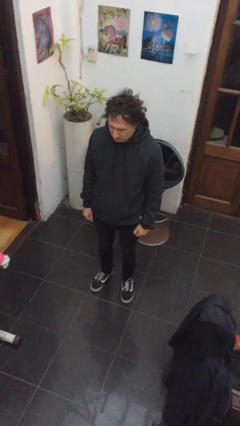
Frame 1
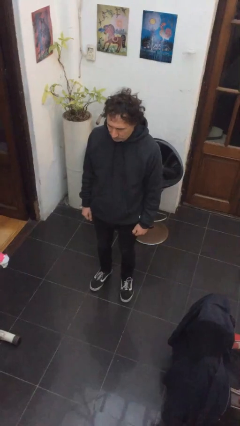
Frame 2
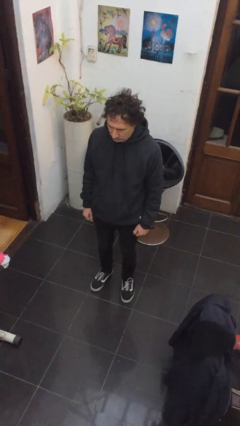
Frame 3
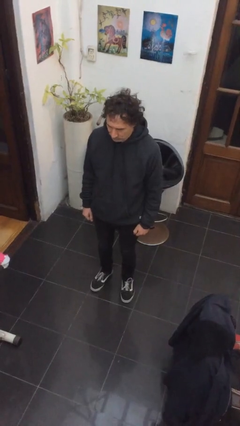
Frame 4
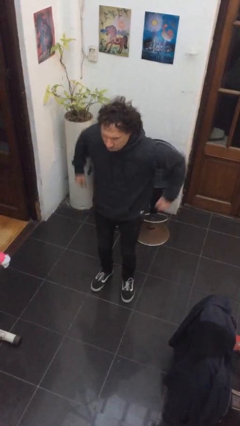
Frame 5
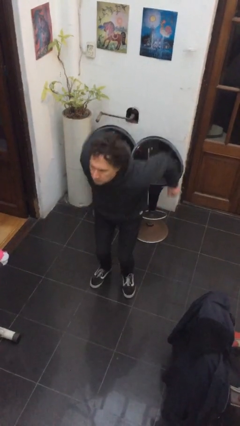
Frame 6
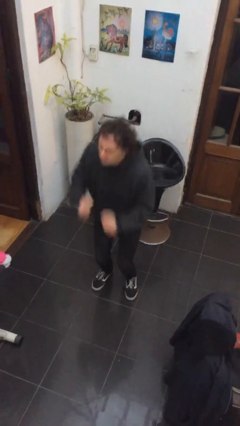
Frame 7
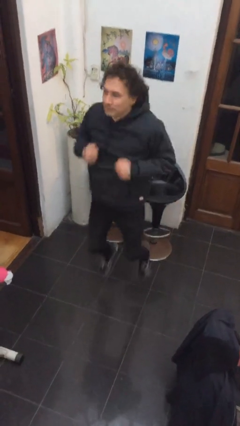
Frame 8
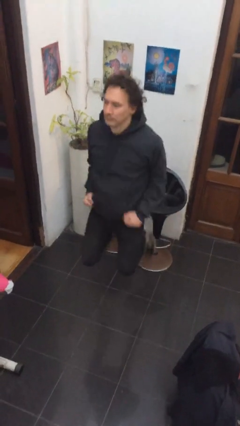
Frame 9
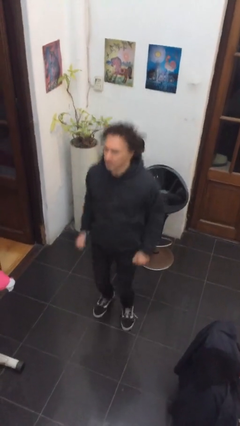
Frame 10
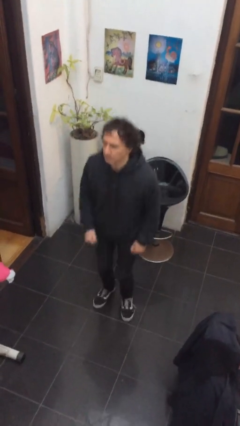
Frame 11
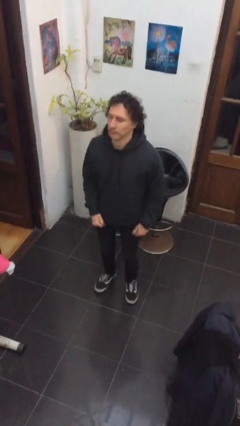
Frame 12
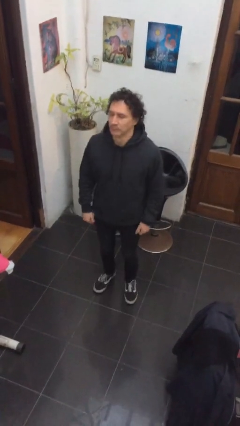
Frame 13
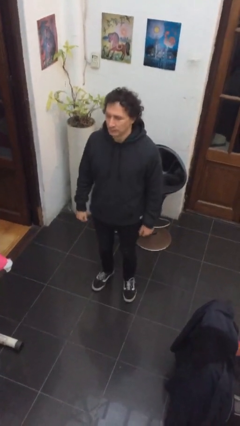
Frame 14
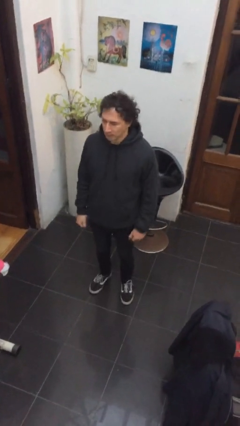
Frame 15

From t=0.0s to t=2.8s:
person jumps

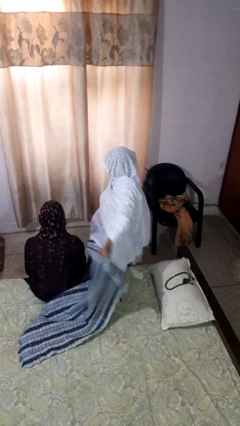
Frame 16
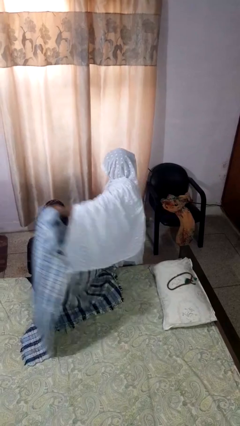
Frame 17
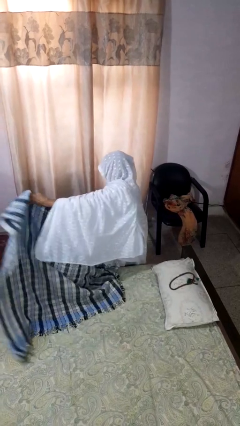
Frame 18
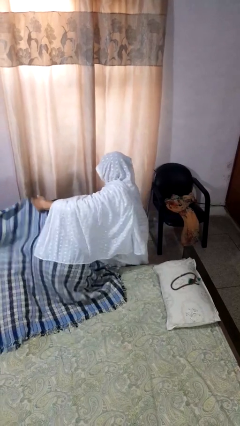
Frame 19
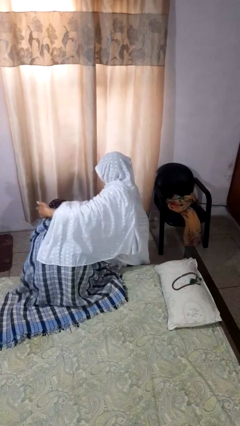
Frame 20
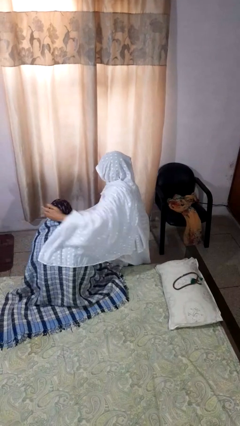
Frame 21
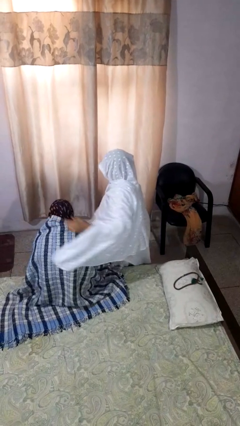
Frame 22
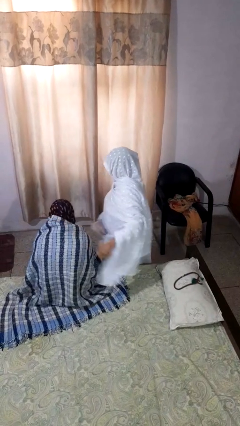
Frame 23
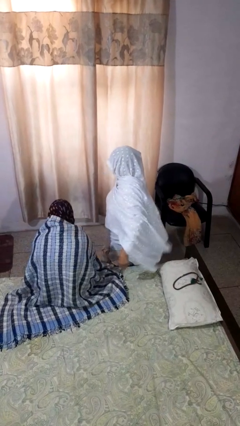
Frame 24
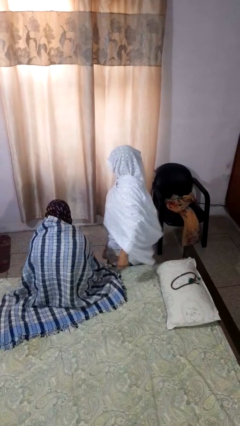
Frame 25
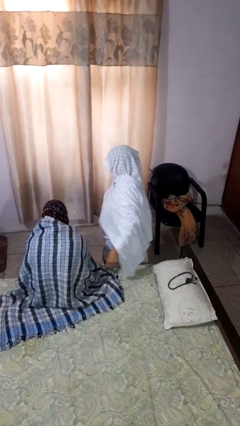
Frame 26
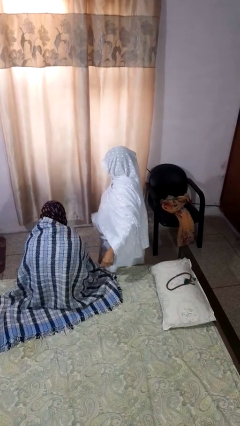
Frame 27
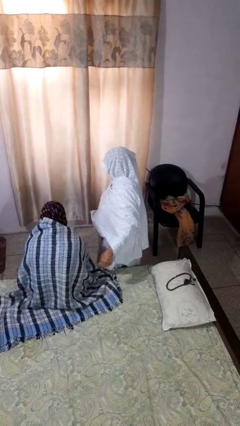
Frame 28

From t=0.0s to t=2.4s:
person covers friend with blanket

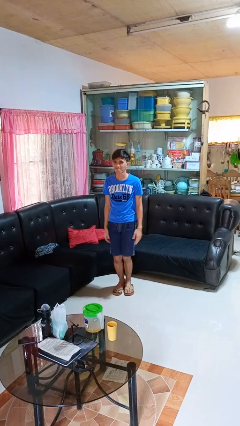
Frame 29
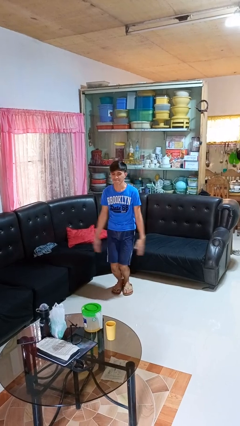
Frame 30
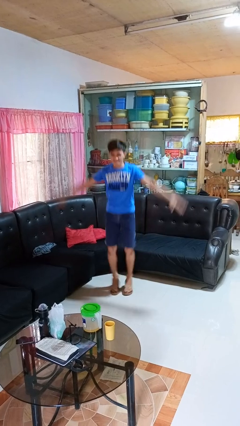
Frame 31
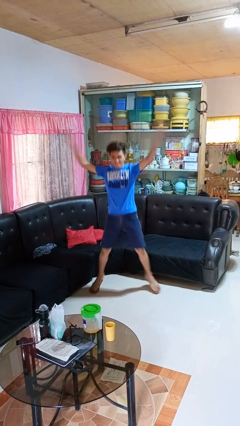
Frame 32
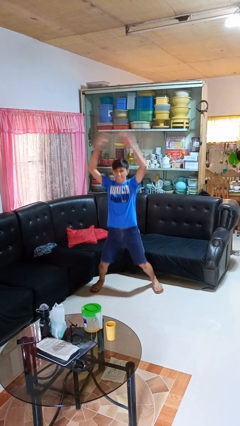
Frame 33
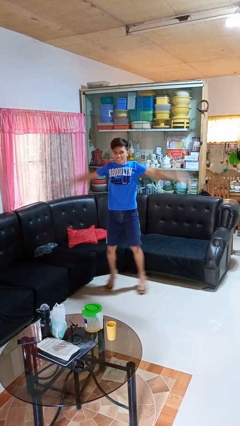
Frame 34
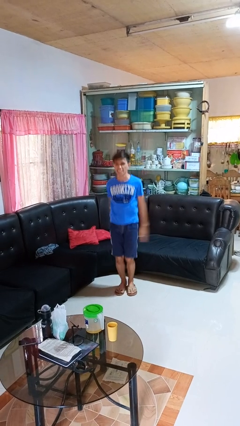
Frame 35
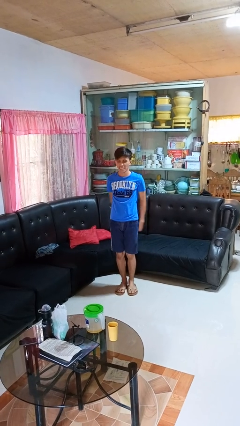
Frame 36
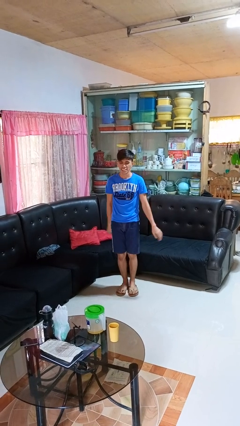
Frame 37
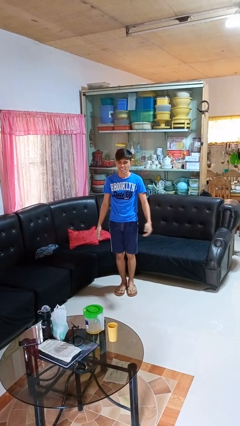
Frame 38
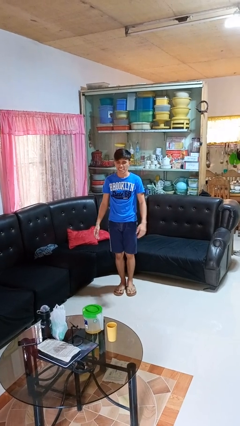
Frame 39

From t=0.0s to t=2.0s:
person exercises with jumping jacks

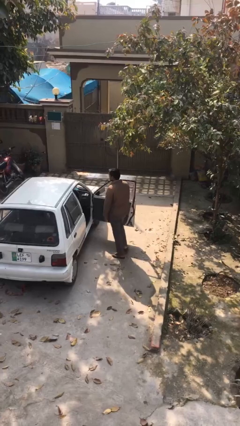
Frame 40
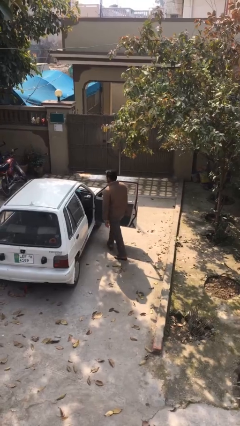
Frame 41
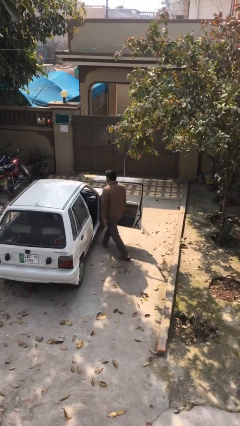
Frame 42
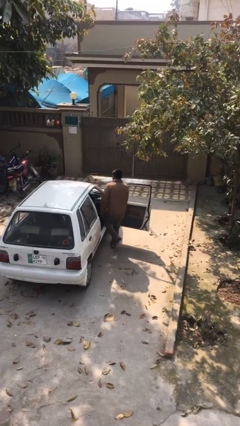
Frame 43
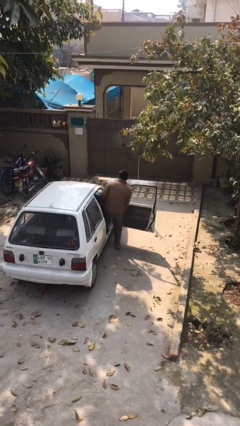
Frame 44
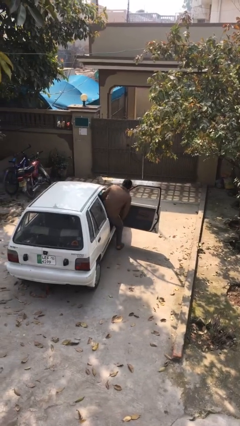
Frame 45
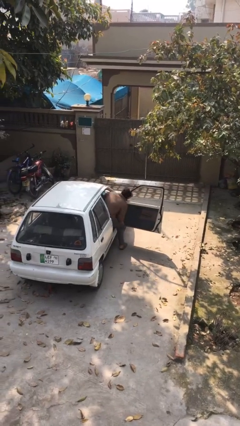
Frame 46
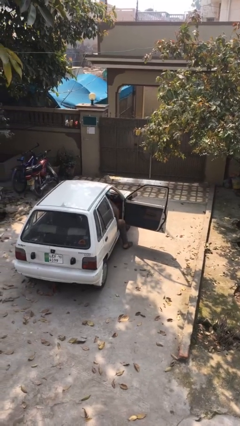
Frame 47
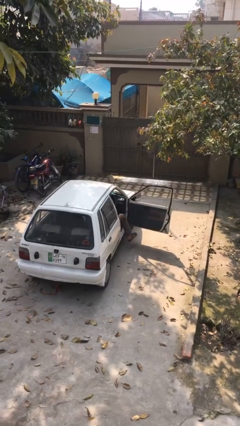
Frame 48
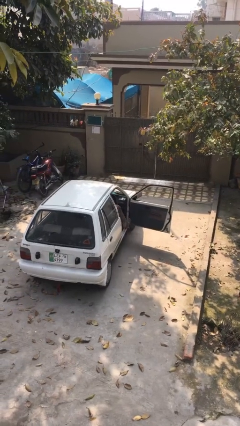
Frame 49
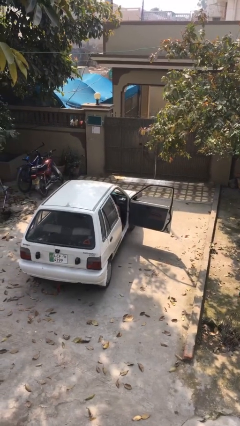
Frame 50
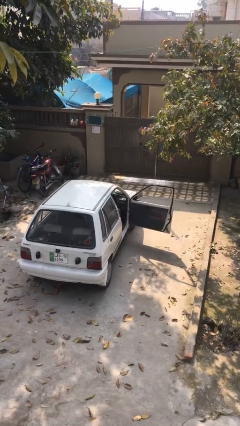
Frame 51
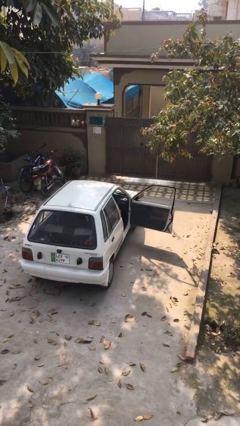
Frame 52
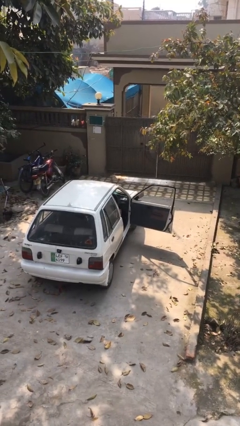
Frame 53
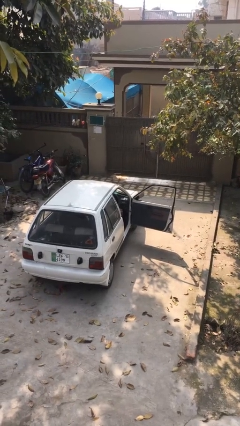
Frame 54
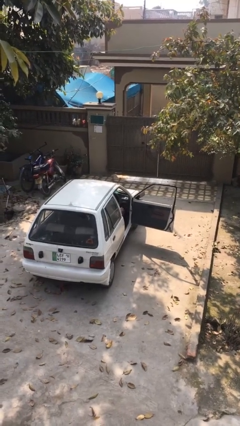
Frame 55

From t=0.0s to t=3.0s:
person enters car

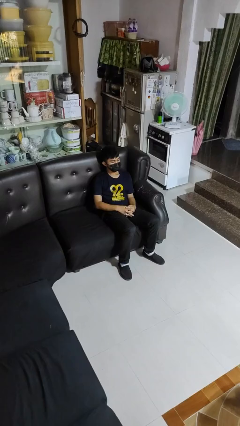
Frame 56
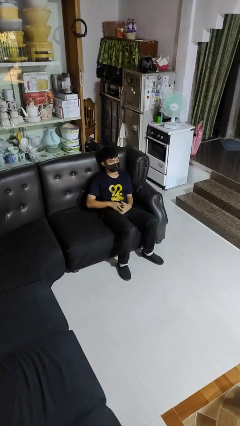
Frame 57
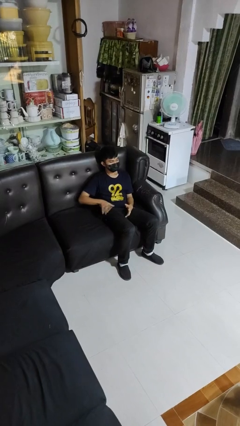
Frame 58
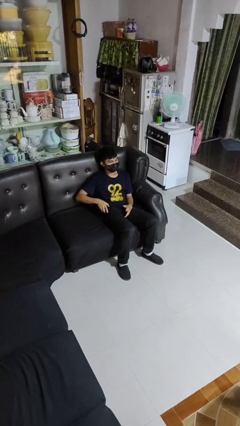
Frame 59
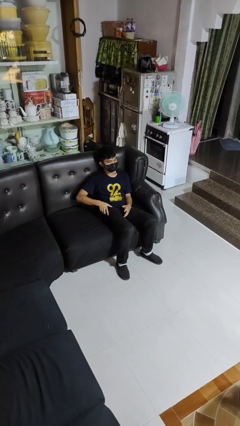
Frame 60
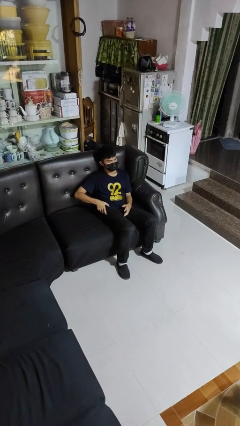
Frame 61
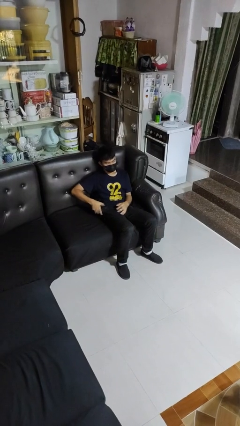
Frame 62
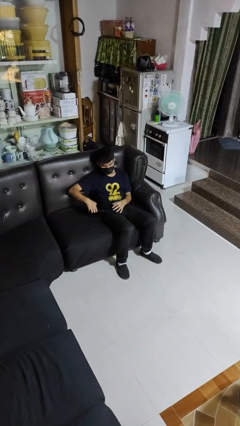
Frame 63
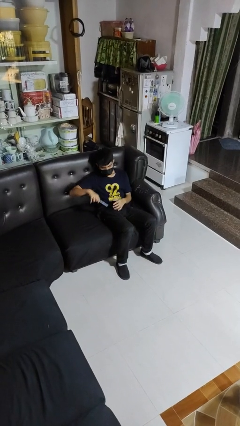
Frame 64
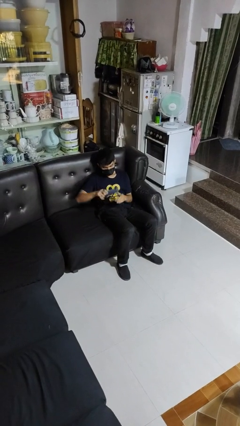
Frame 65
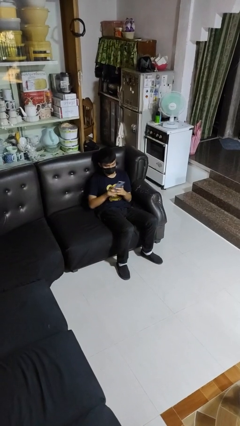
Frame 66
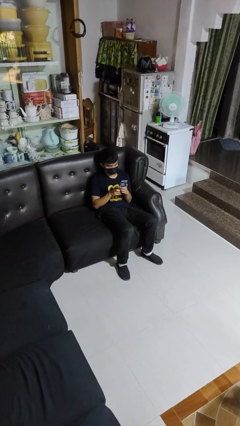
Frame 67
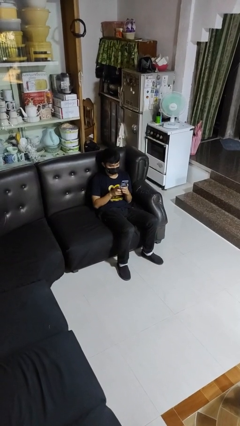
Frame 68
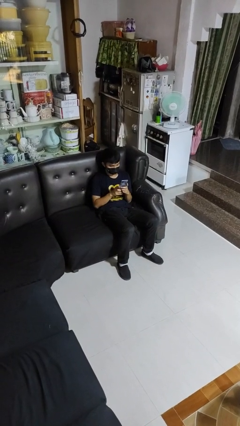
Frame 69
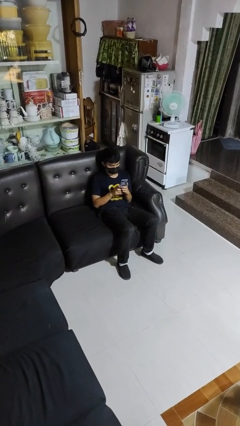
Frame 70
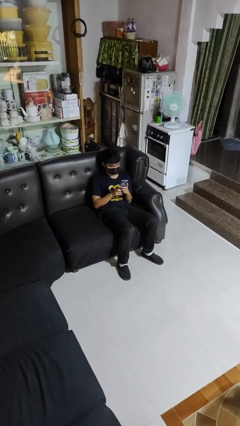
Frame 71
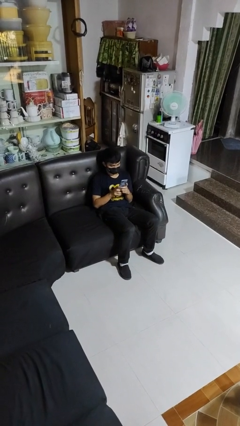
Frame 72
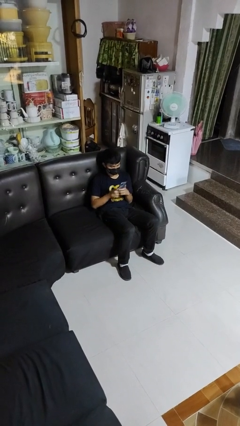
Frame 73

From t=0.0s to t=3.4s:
person takes phone from pocket

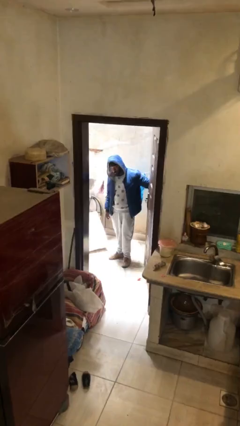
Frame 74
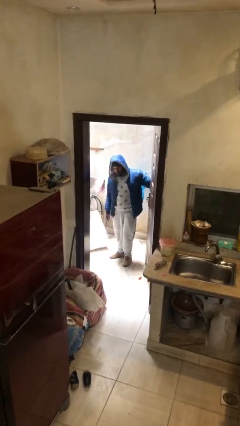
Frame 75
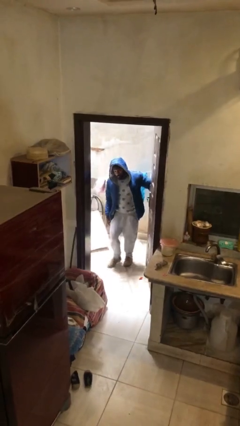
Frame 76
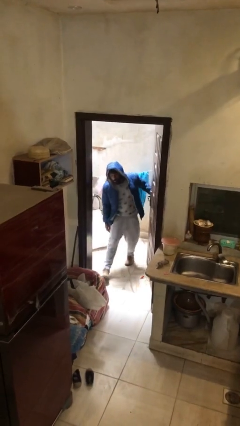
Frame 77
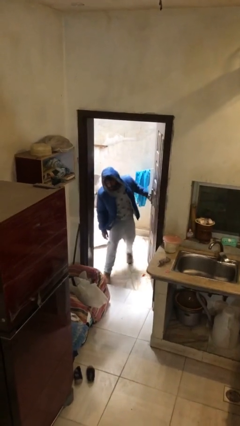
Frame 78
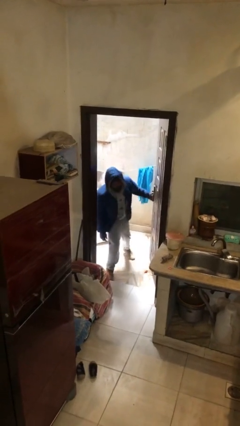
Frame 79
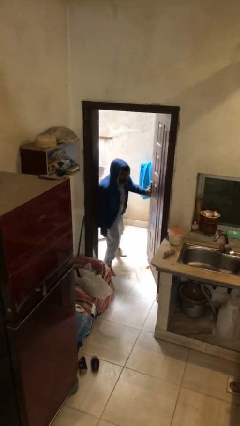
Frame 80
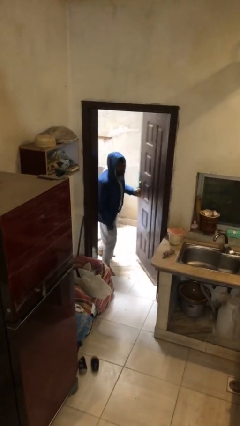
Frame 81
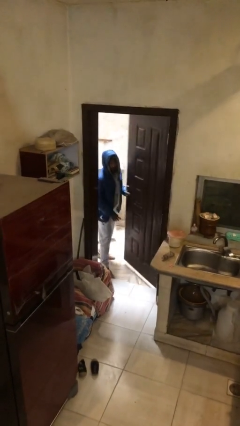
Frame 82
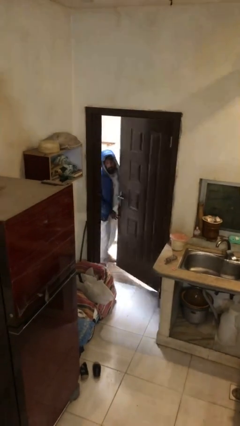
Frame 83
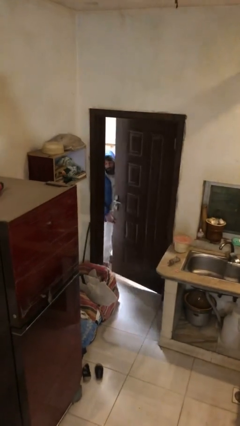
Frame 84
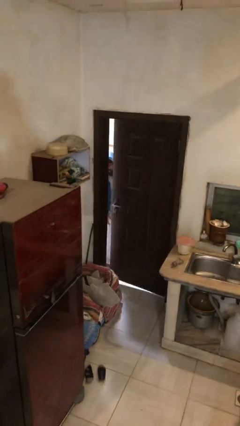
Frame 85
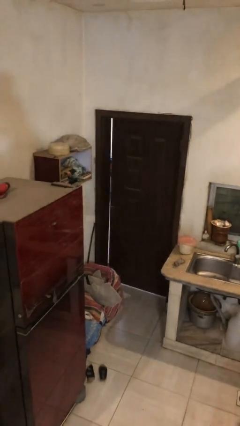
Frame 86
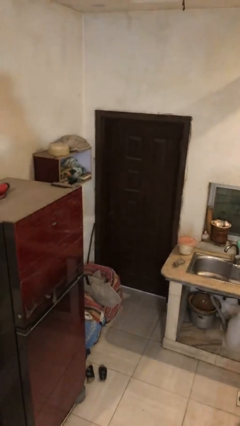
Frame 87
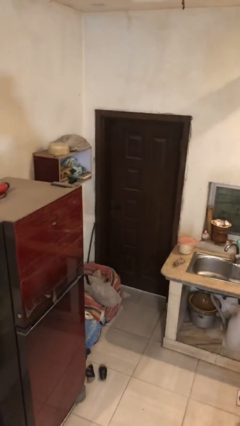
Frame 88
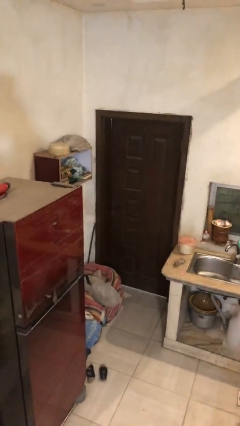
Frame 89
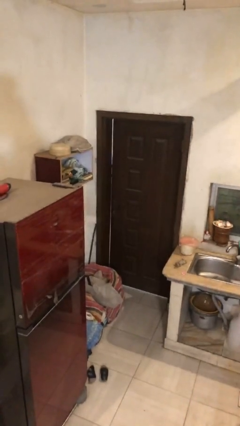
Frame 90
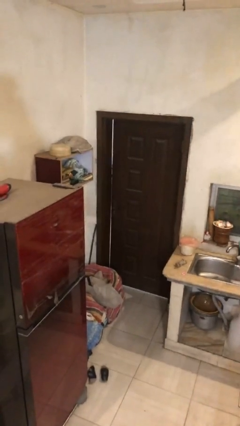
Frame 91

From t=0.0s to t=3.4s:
person closes facility door

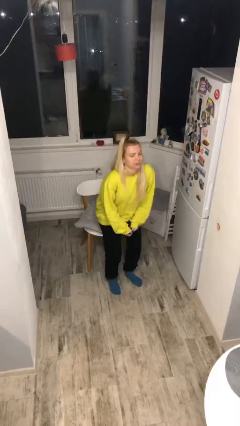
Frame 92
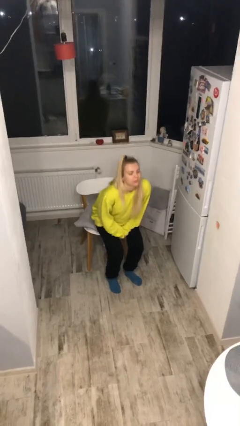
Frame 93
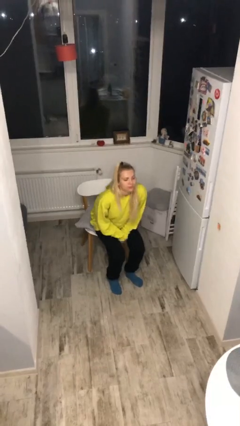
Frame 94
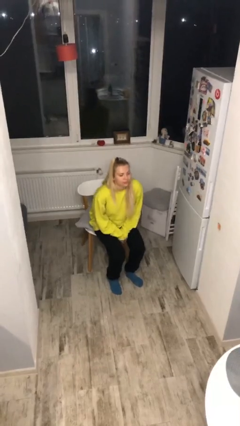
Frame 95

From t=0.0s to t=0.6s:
person sits down
